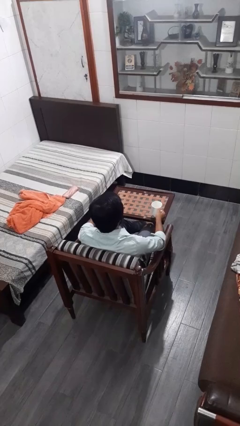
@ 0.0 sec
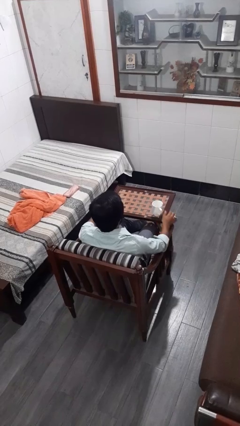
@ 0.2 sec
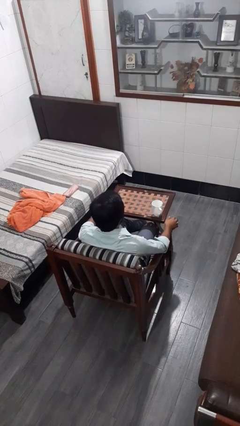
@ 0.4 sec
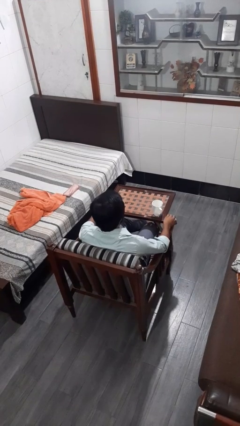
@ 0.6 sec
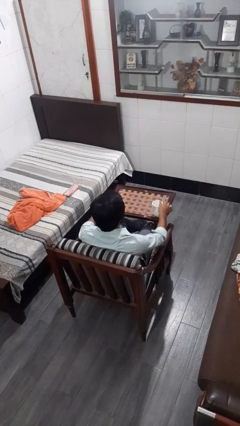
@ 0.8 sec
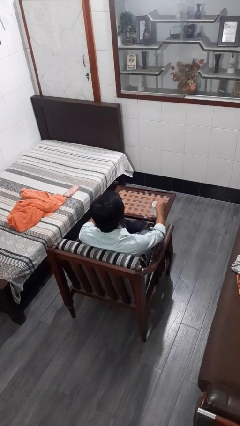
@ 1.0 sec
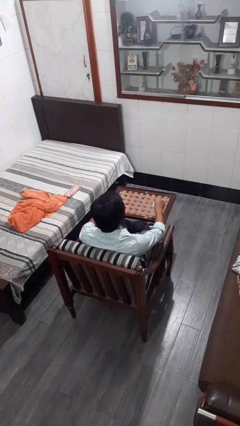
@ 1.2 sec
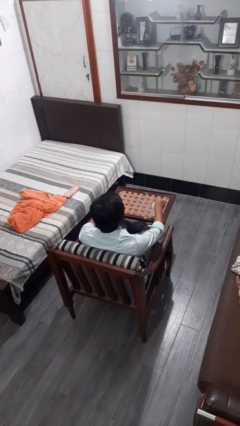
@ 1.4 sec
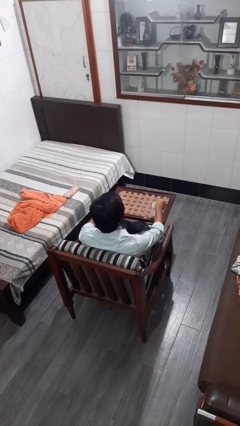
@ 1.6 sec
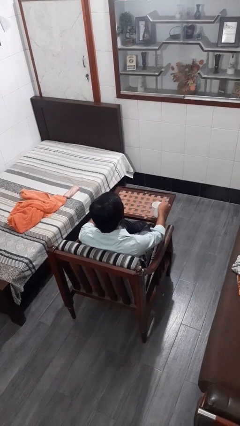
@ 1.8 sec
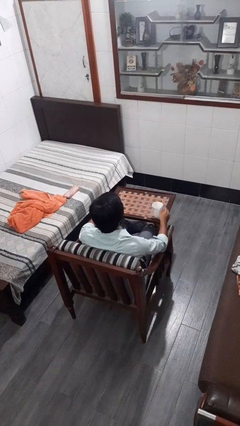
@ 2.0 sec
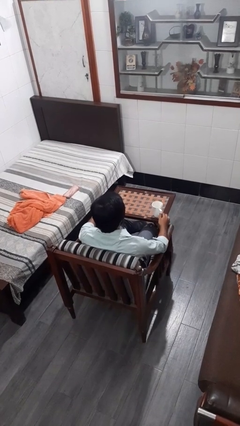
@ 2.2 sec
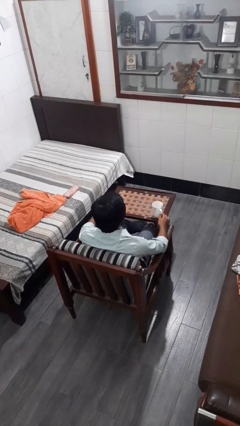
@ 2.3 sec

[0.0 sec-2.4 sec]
person stirs mug

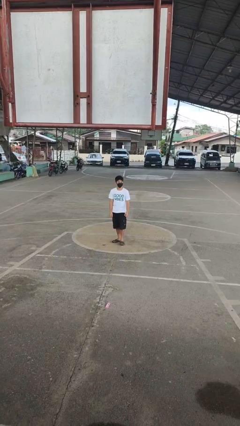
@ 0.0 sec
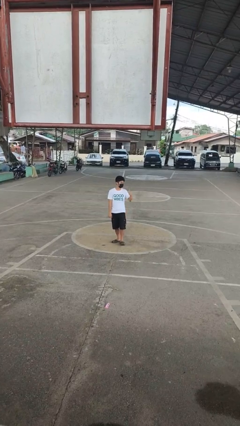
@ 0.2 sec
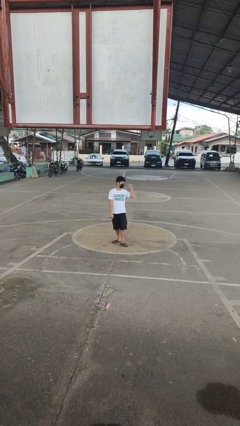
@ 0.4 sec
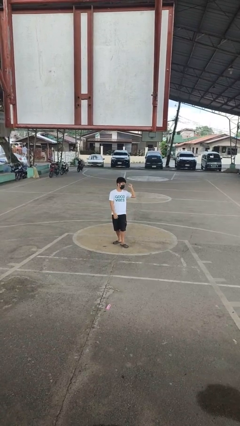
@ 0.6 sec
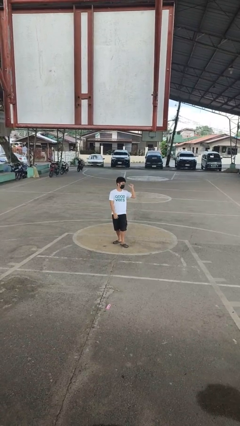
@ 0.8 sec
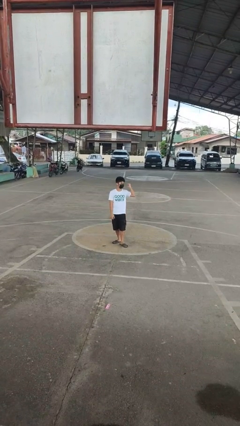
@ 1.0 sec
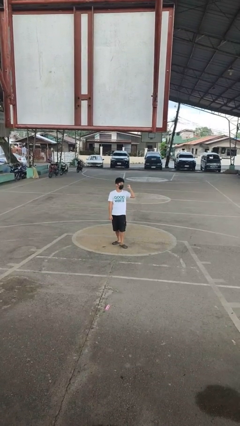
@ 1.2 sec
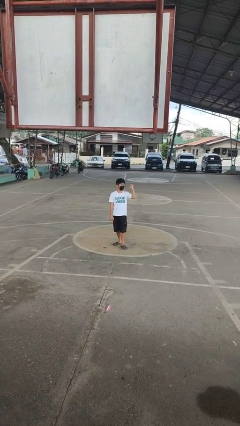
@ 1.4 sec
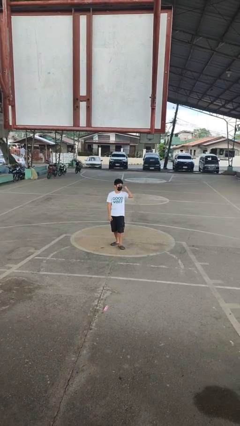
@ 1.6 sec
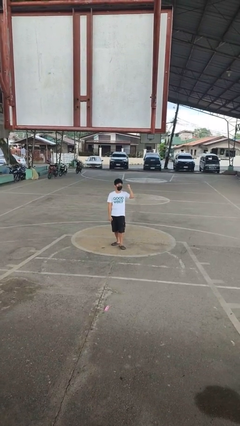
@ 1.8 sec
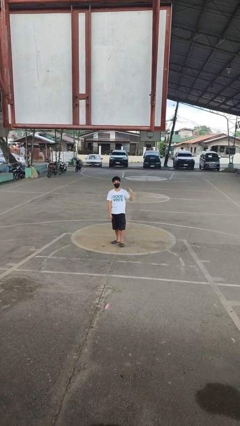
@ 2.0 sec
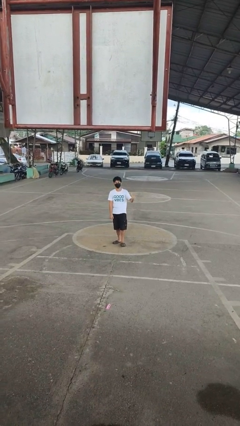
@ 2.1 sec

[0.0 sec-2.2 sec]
person gestures behind me

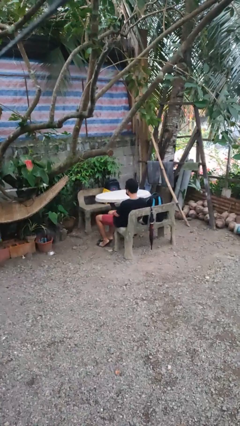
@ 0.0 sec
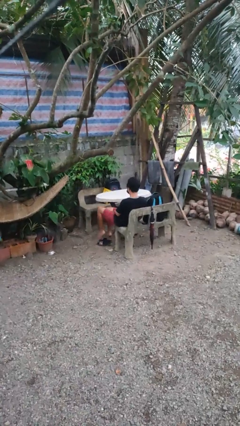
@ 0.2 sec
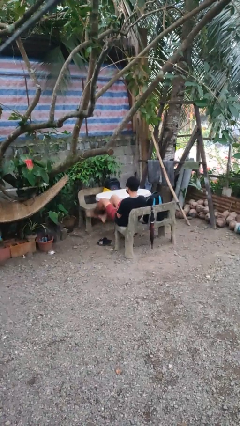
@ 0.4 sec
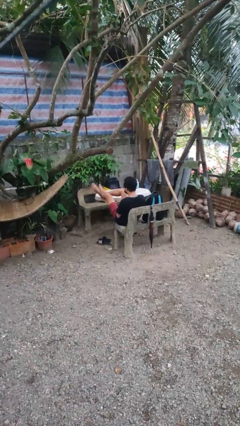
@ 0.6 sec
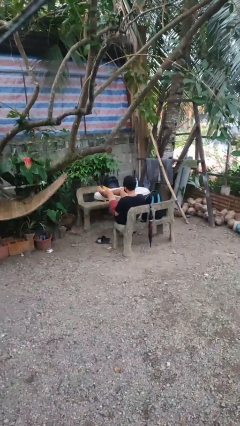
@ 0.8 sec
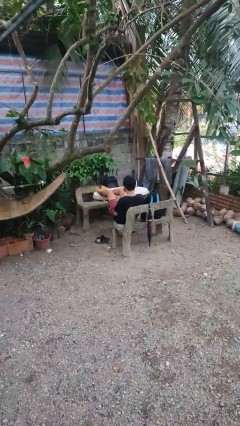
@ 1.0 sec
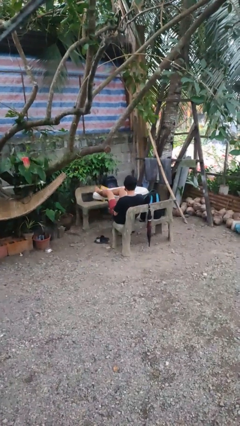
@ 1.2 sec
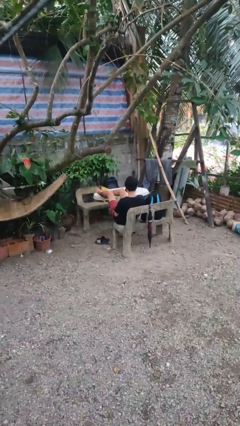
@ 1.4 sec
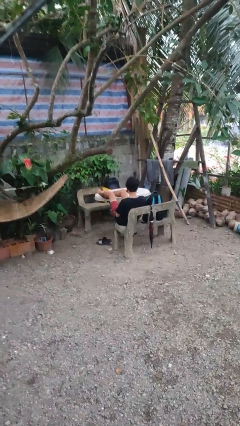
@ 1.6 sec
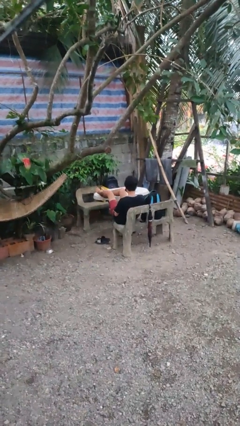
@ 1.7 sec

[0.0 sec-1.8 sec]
person puts feet up

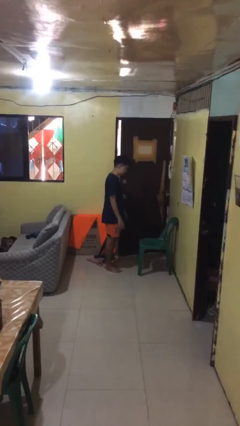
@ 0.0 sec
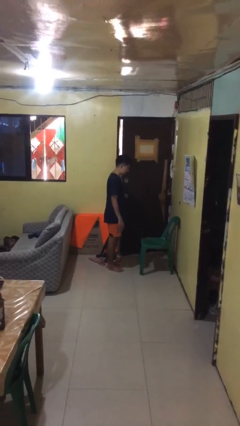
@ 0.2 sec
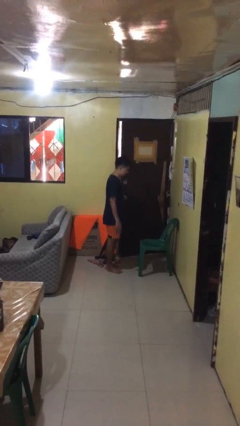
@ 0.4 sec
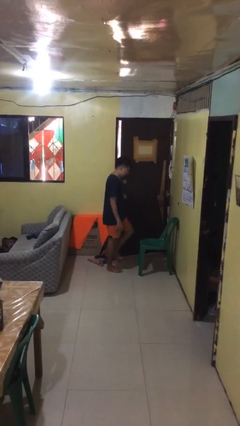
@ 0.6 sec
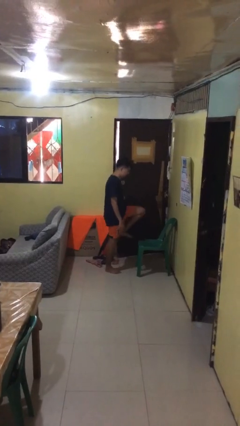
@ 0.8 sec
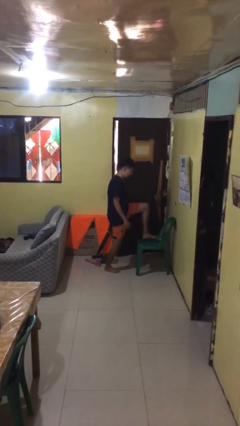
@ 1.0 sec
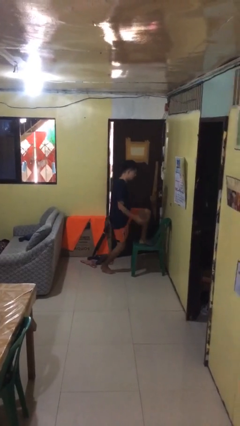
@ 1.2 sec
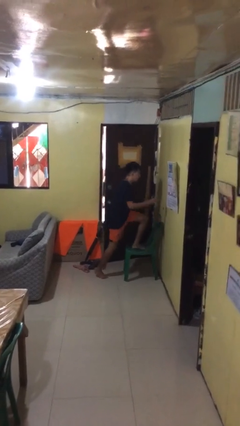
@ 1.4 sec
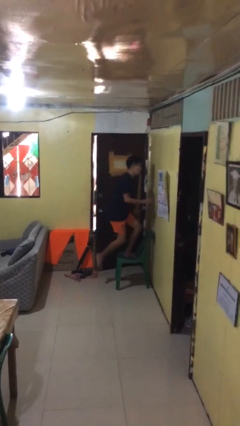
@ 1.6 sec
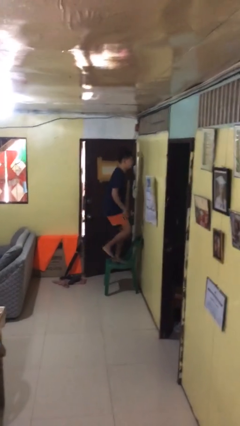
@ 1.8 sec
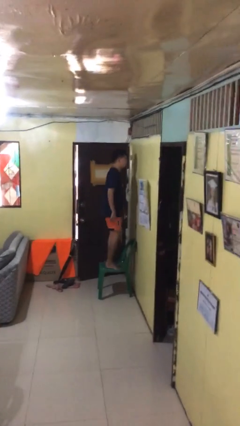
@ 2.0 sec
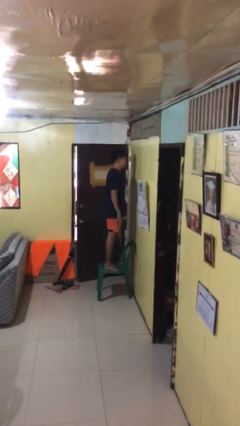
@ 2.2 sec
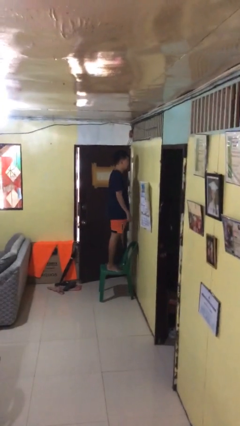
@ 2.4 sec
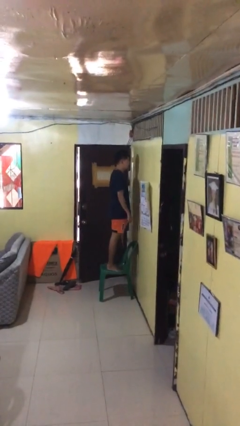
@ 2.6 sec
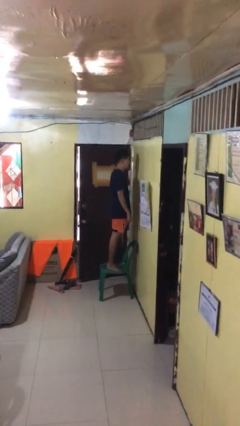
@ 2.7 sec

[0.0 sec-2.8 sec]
person climbs on chair

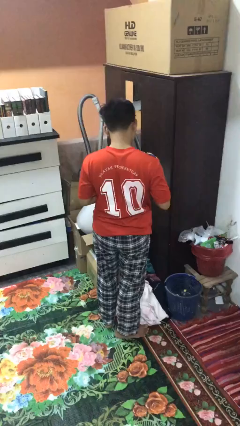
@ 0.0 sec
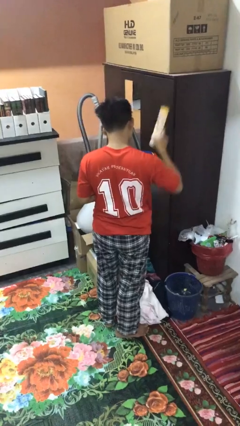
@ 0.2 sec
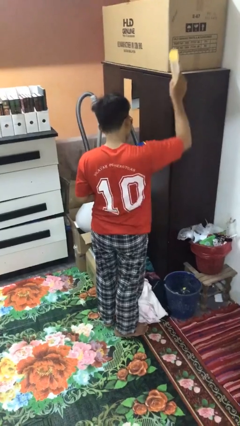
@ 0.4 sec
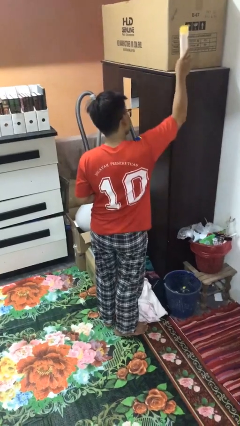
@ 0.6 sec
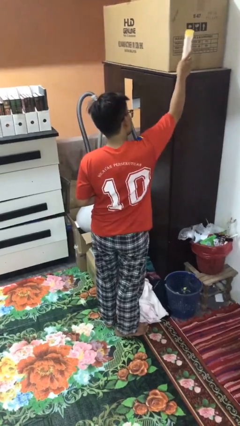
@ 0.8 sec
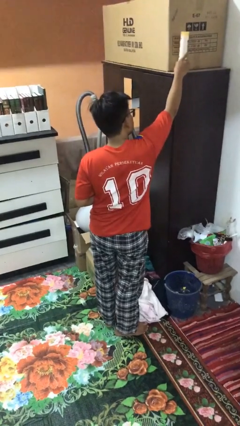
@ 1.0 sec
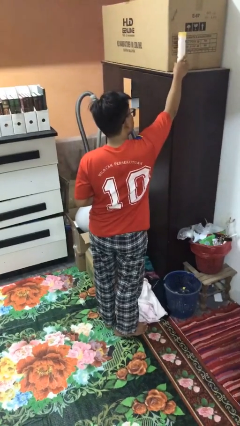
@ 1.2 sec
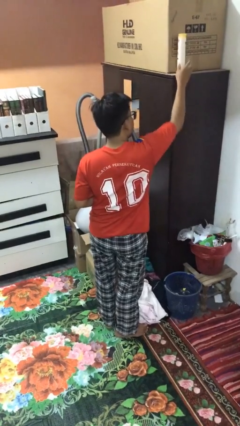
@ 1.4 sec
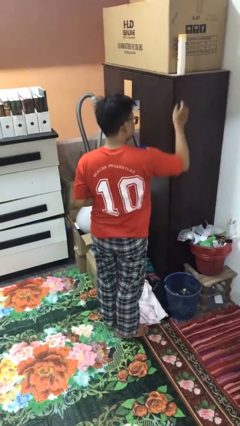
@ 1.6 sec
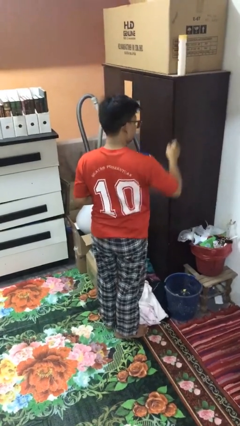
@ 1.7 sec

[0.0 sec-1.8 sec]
person puts down object on shelf

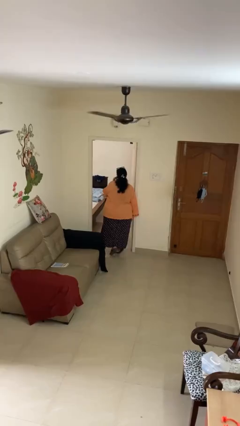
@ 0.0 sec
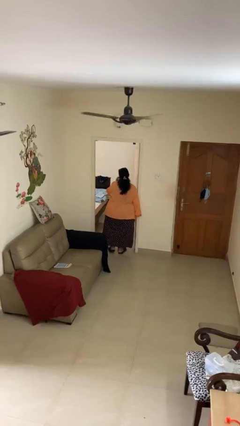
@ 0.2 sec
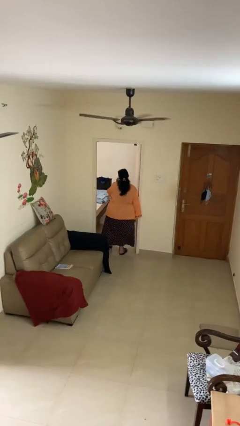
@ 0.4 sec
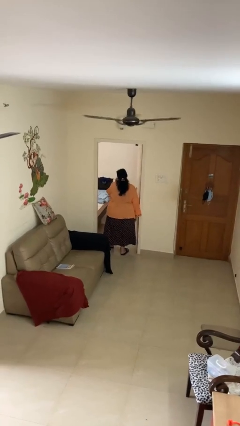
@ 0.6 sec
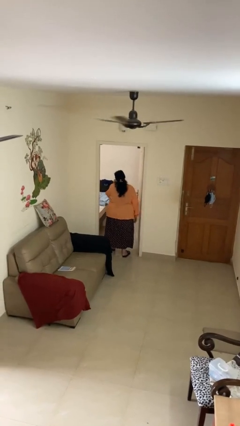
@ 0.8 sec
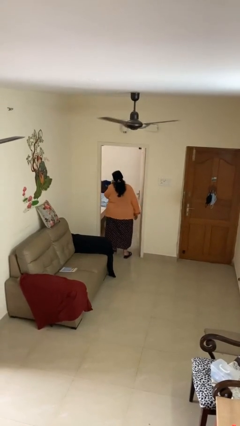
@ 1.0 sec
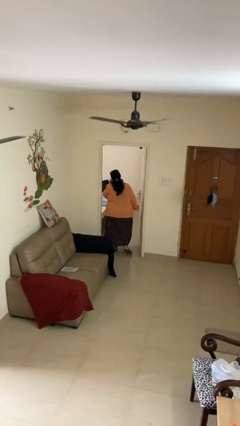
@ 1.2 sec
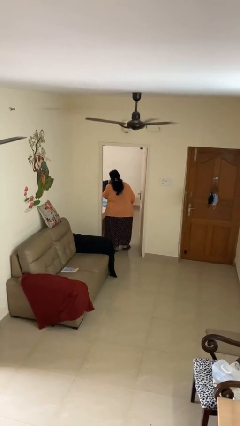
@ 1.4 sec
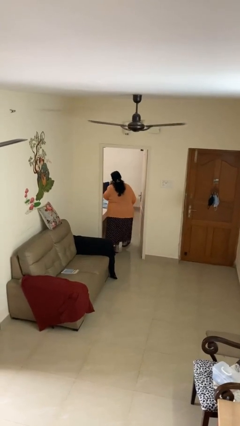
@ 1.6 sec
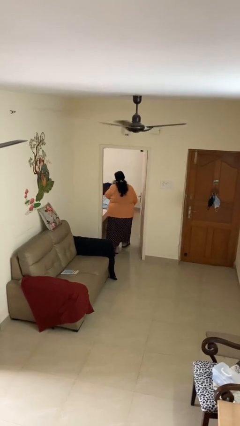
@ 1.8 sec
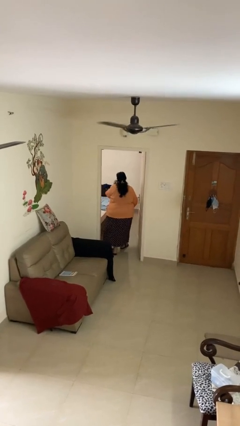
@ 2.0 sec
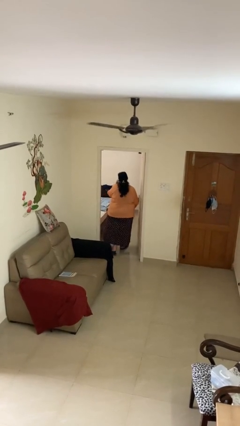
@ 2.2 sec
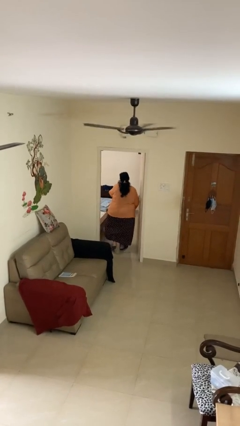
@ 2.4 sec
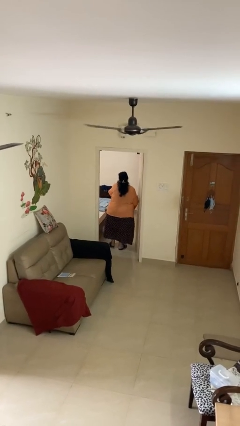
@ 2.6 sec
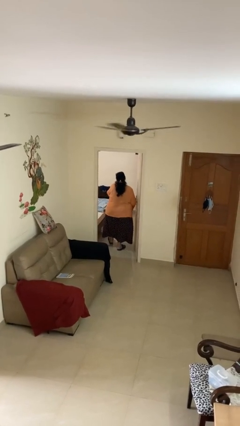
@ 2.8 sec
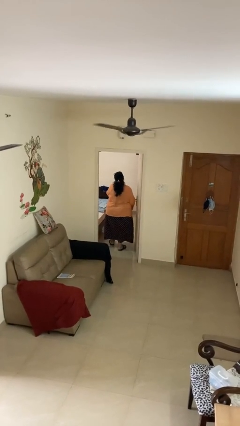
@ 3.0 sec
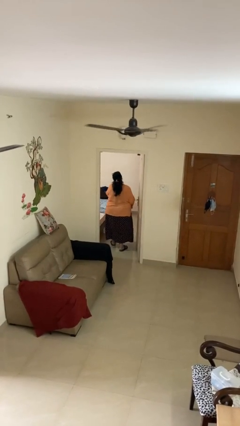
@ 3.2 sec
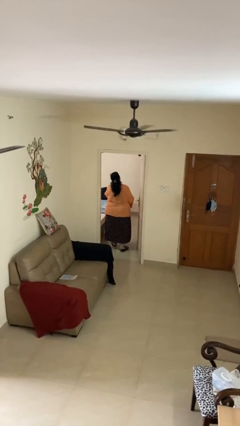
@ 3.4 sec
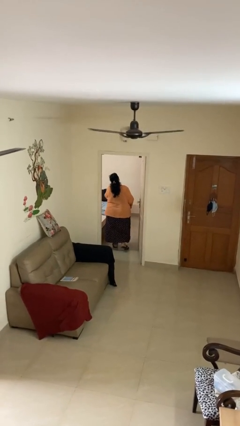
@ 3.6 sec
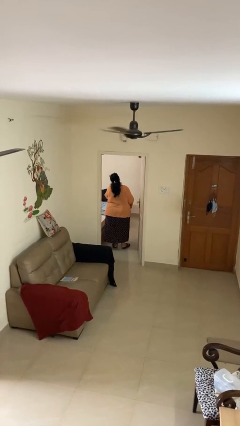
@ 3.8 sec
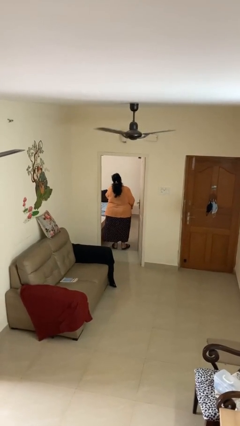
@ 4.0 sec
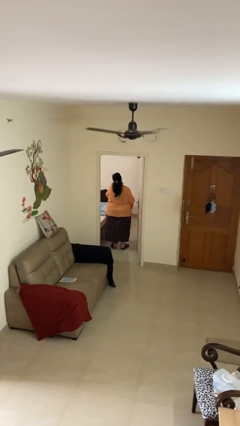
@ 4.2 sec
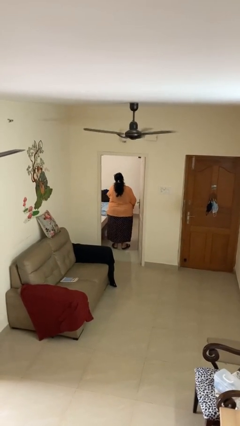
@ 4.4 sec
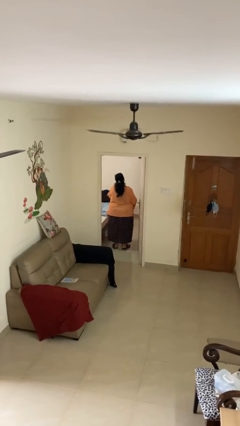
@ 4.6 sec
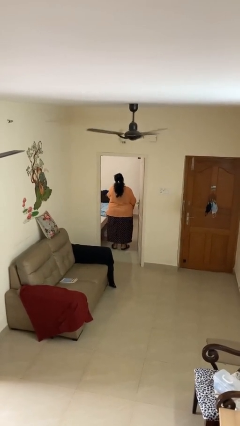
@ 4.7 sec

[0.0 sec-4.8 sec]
person exits scene through structure

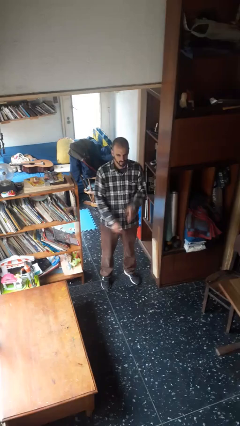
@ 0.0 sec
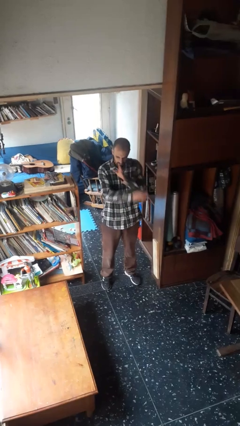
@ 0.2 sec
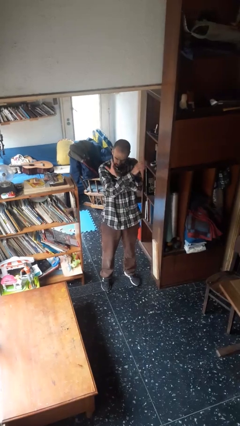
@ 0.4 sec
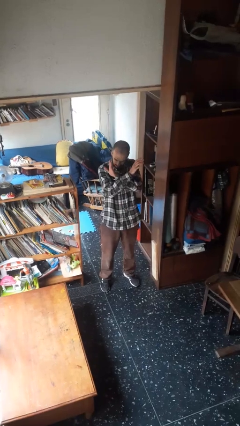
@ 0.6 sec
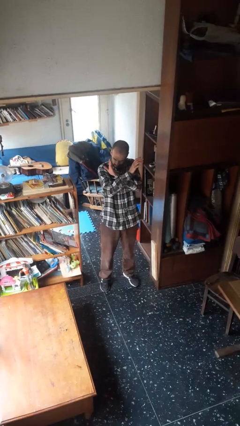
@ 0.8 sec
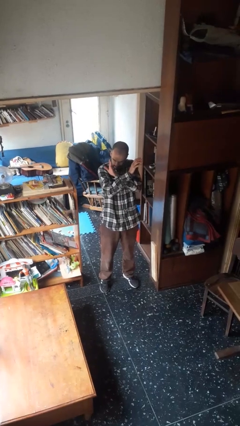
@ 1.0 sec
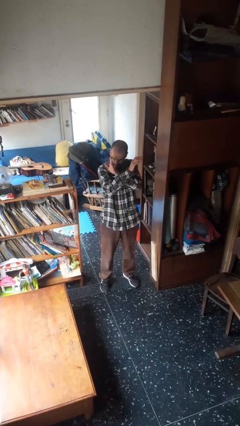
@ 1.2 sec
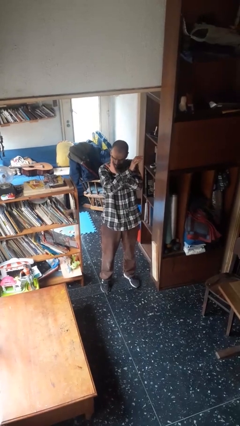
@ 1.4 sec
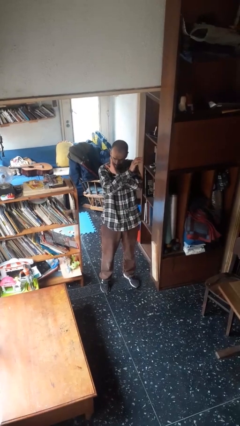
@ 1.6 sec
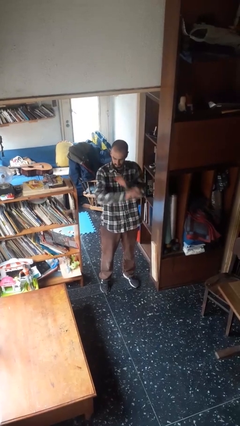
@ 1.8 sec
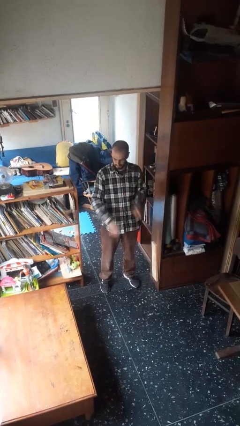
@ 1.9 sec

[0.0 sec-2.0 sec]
person gestures arms x
